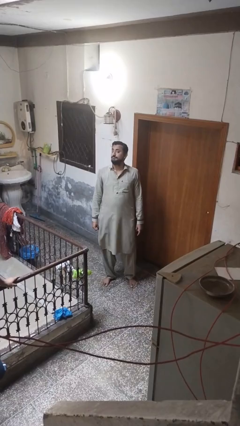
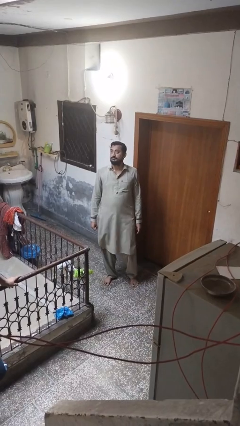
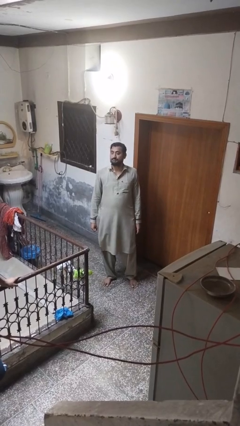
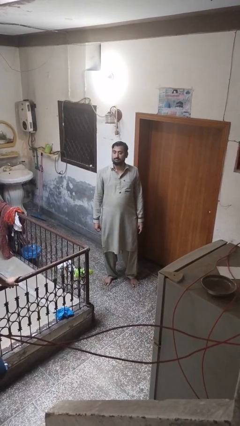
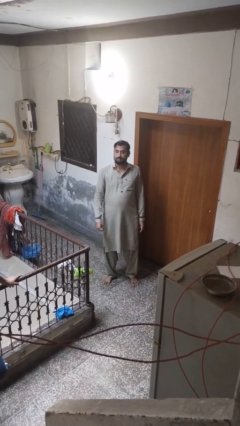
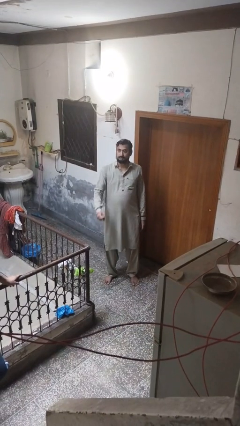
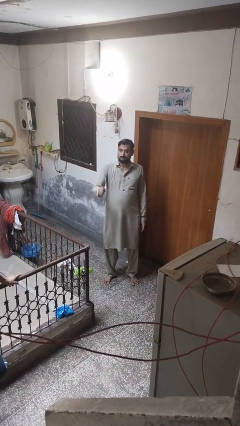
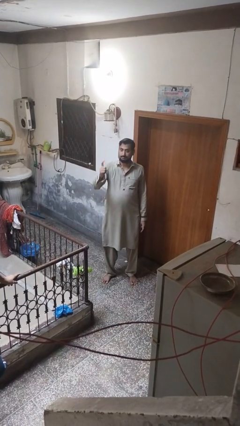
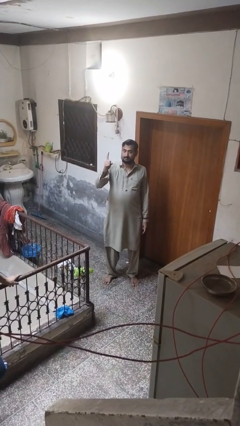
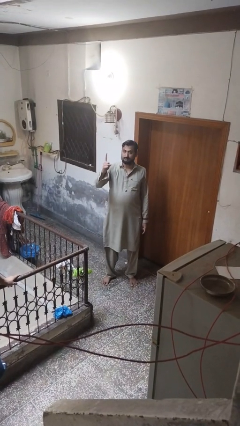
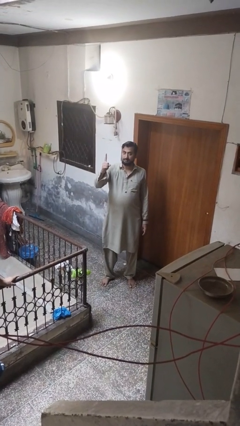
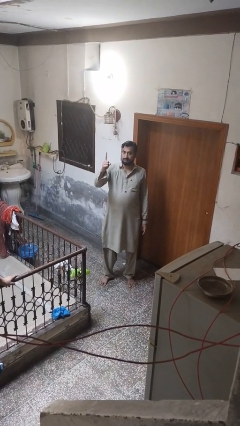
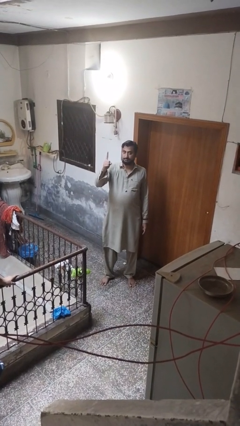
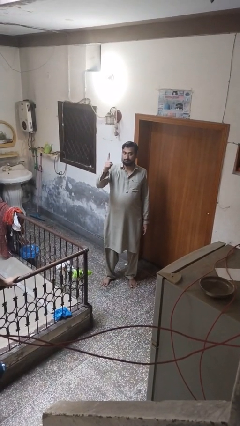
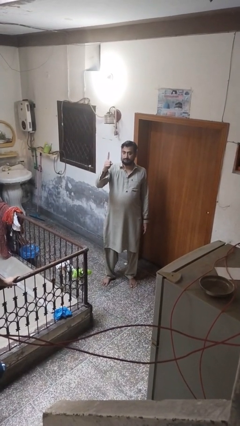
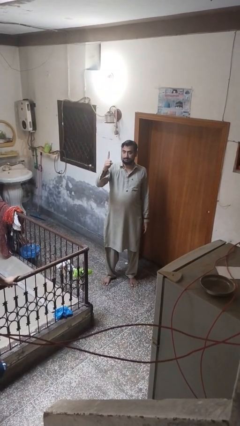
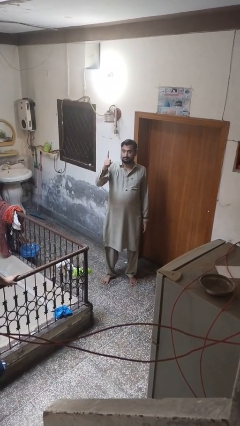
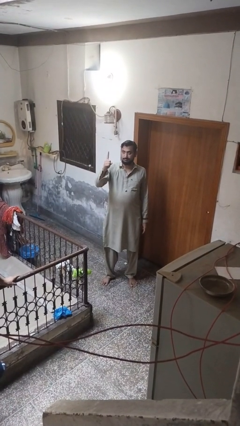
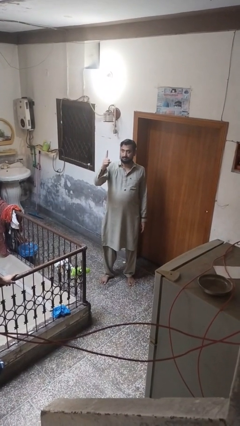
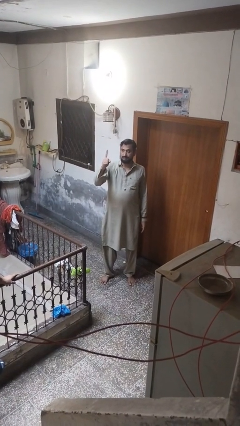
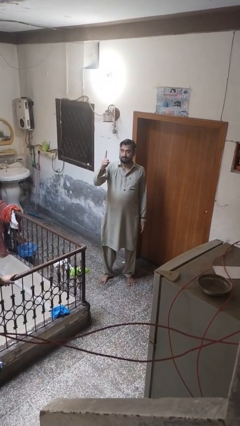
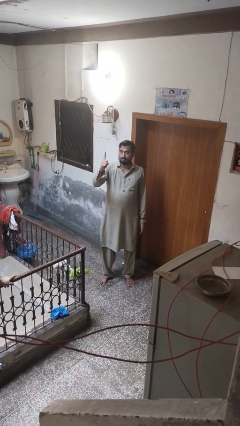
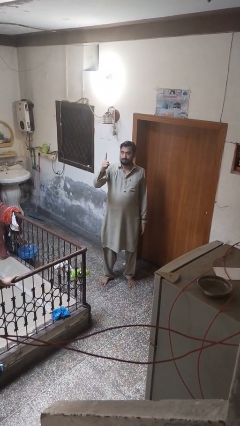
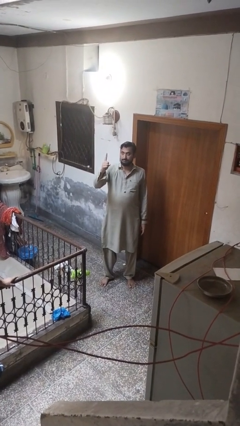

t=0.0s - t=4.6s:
person gestures number one

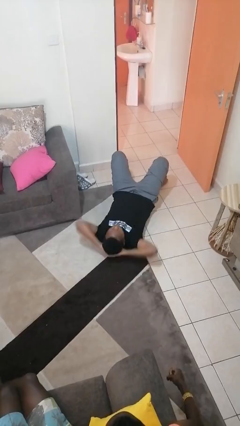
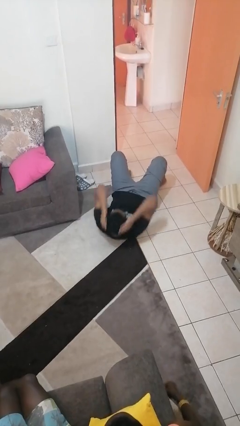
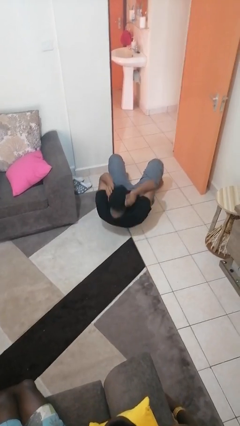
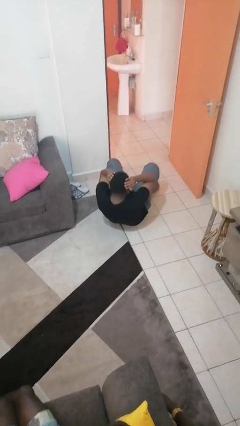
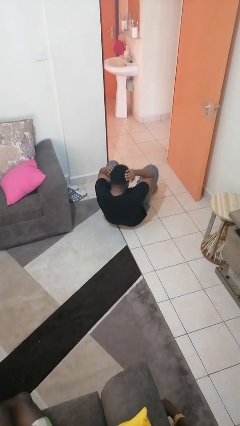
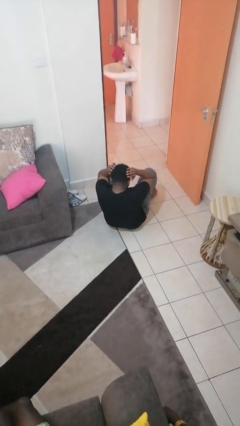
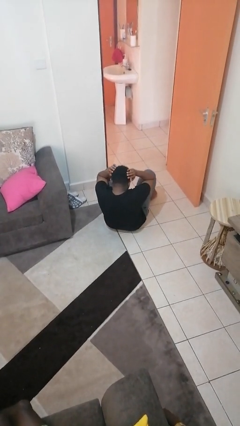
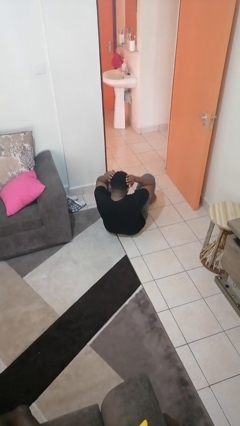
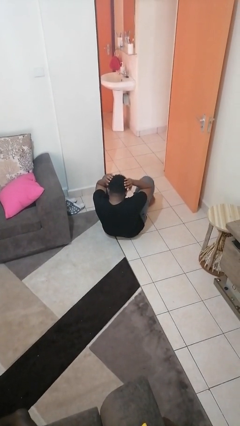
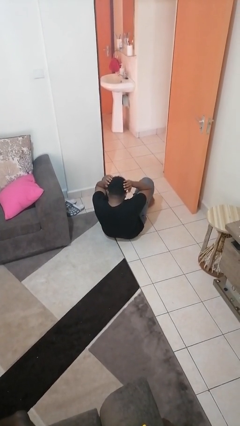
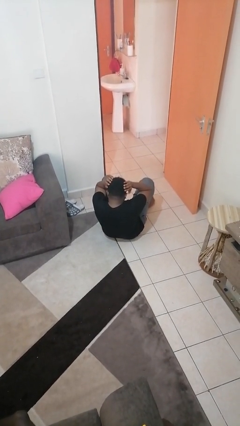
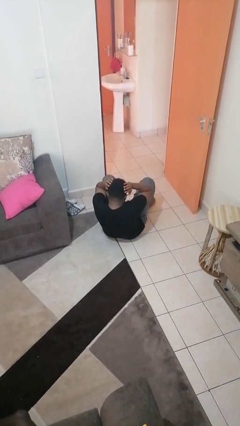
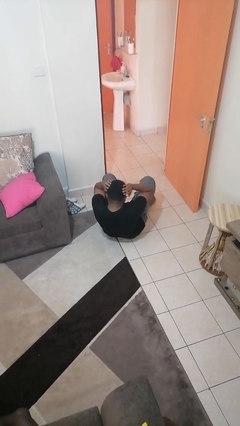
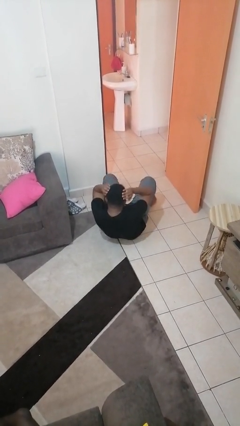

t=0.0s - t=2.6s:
person exercises with situp

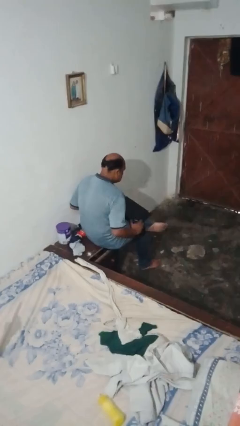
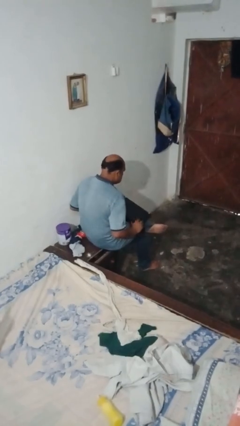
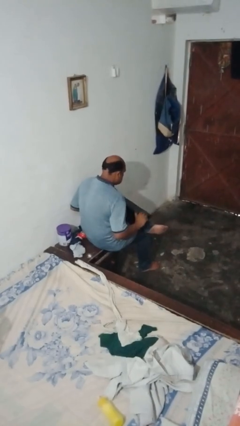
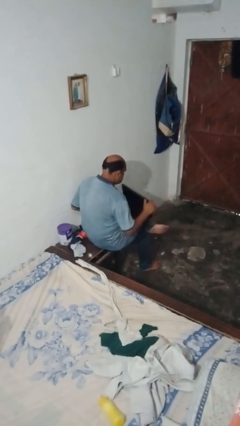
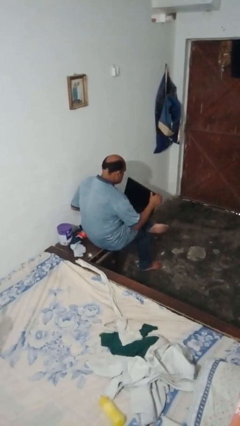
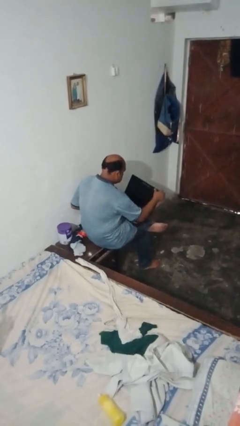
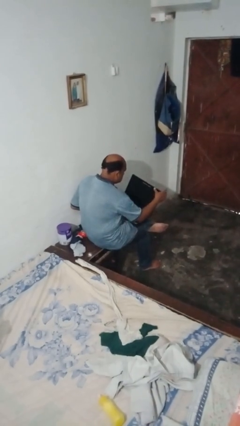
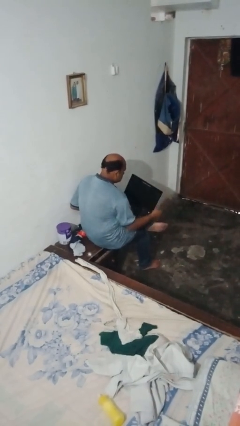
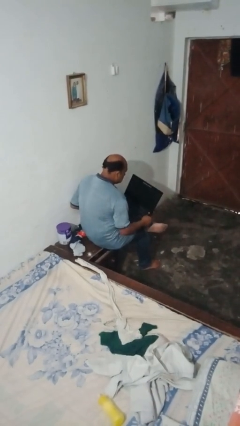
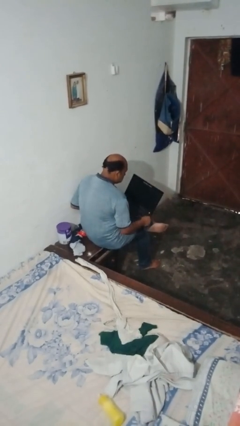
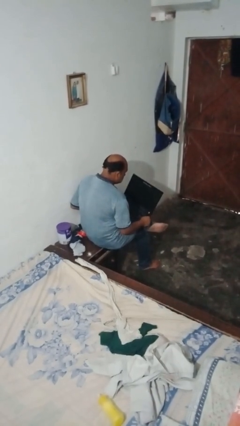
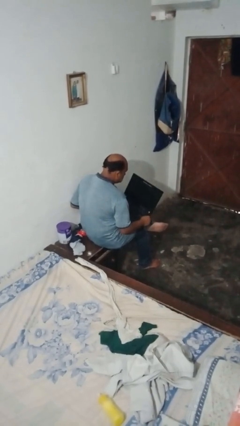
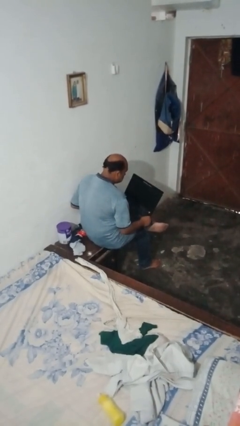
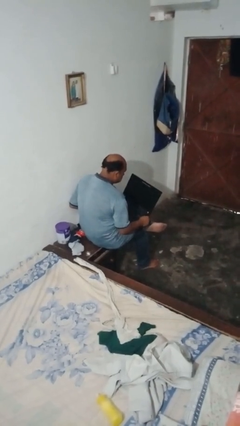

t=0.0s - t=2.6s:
person opens laptop

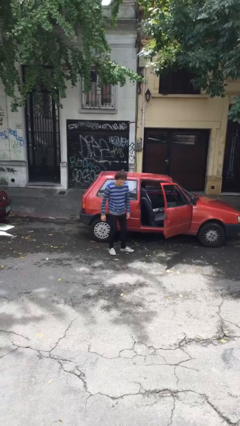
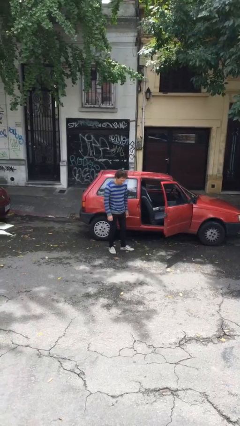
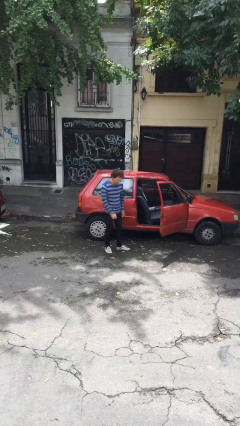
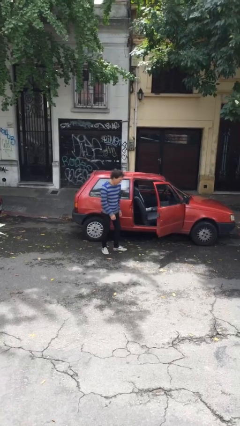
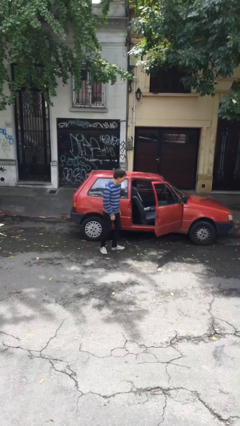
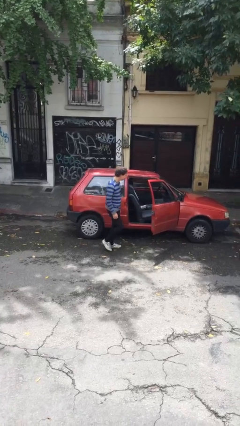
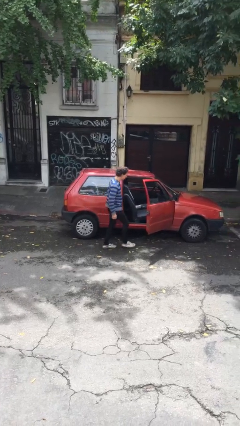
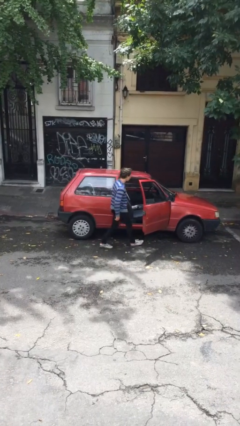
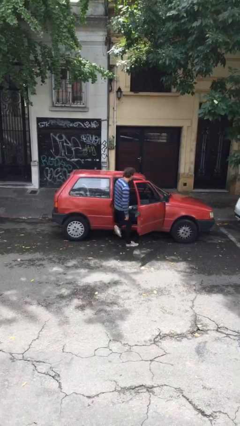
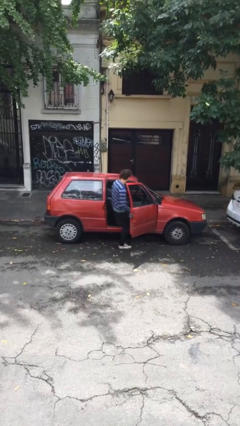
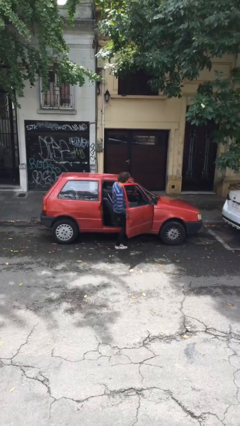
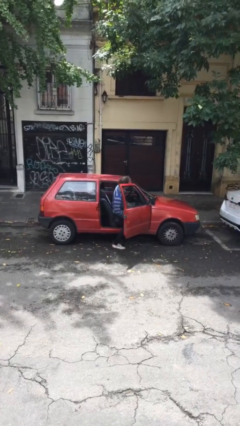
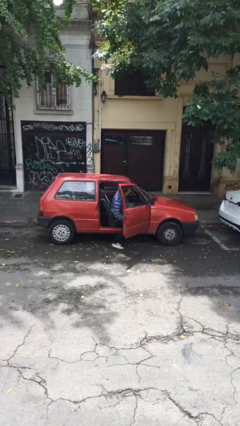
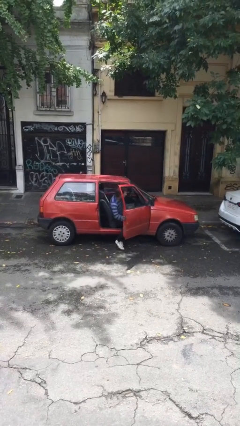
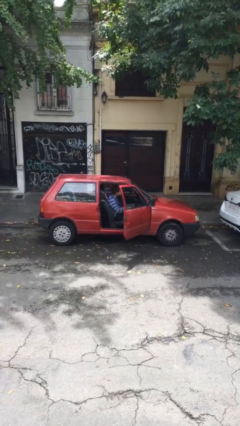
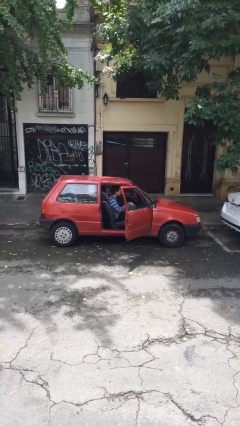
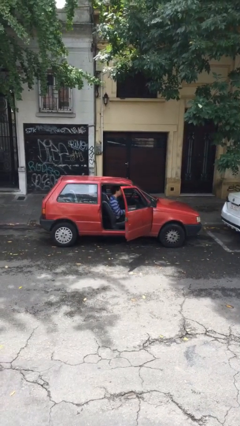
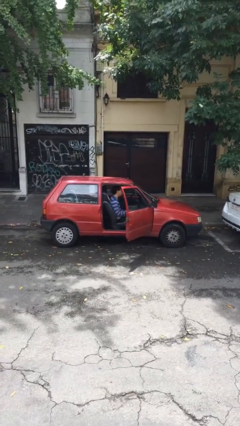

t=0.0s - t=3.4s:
person enters car

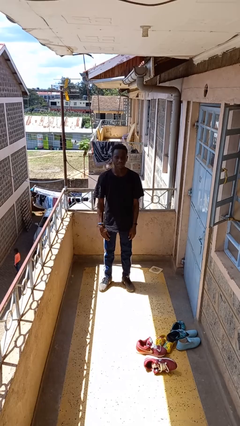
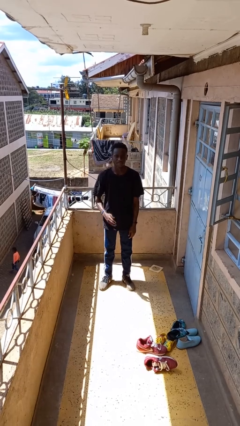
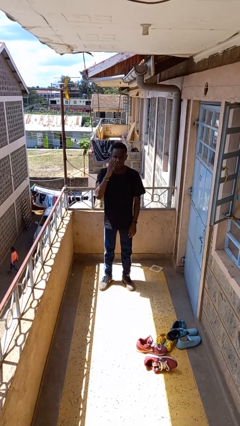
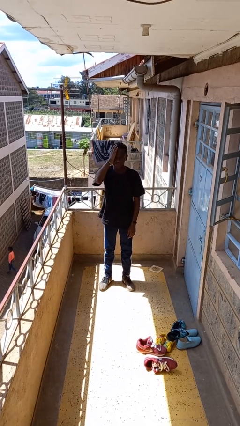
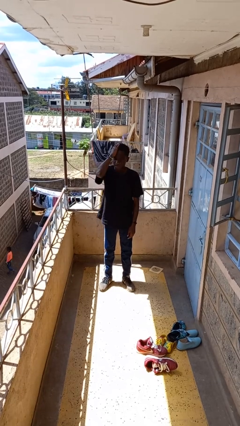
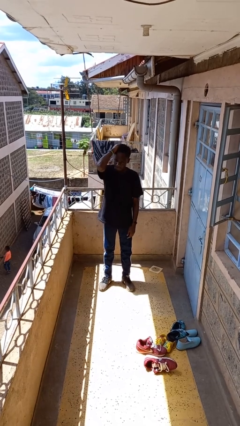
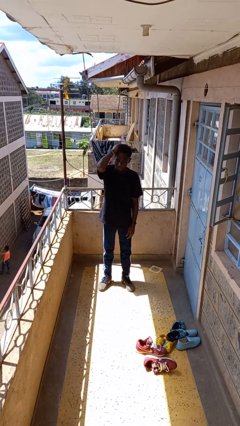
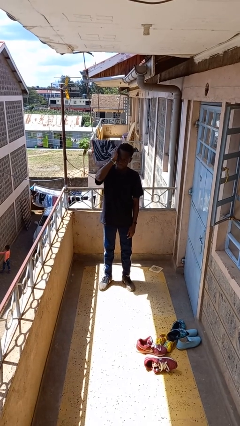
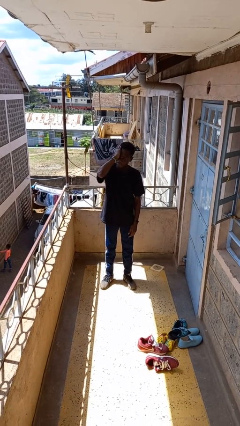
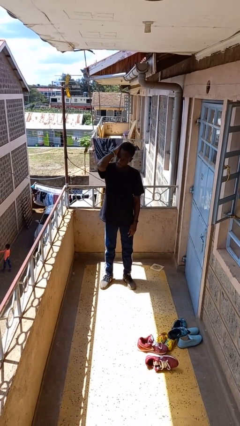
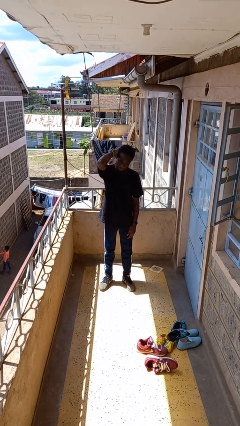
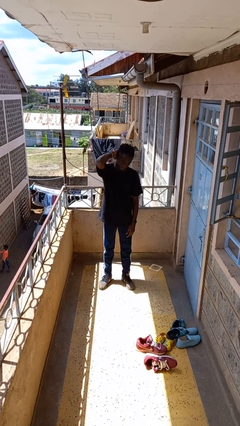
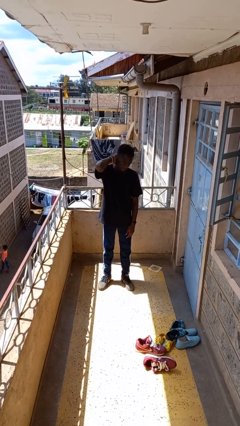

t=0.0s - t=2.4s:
person strokes hair

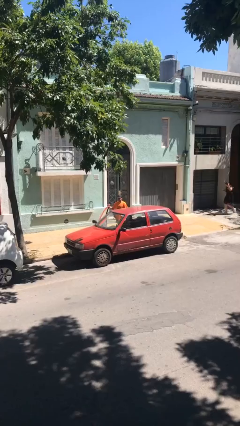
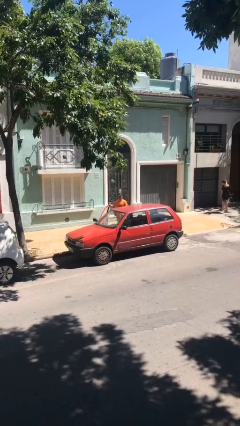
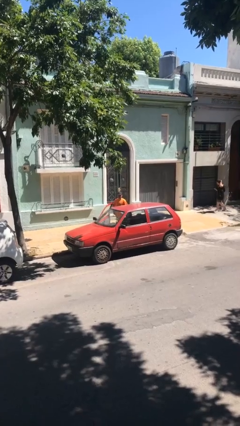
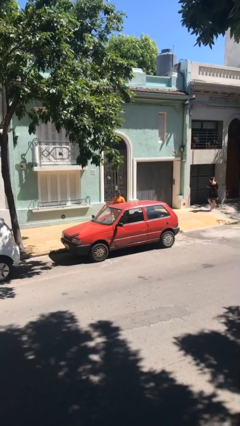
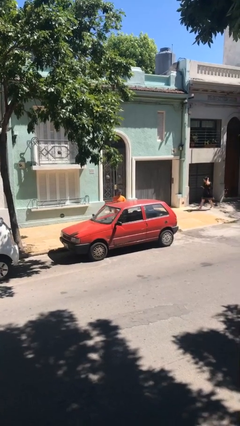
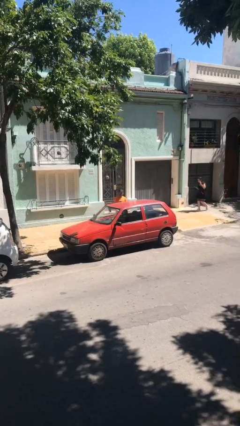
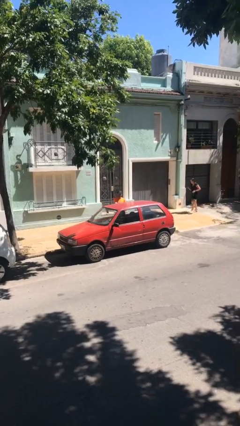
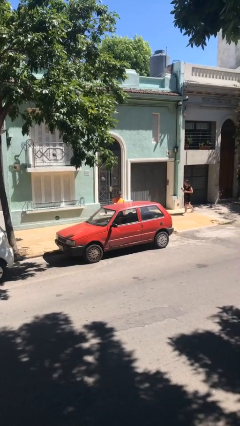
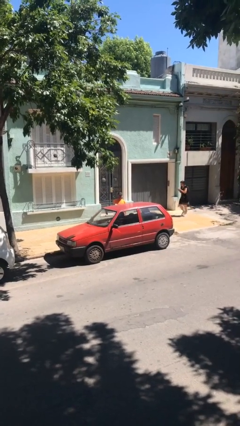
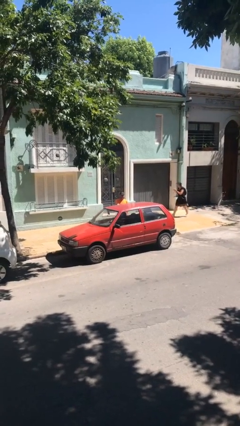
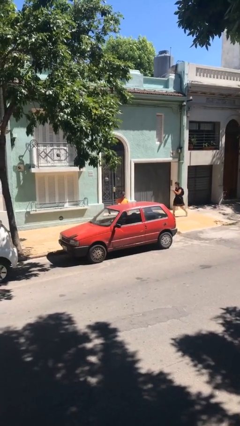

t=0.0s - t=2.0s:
person closes car door
